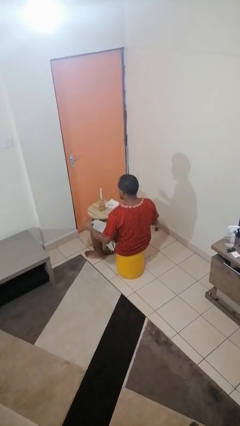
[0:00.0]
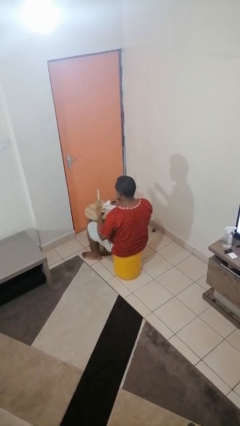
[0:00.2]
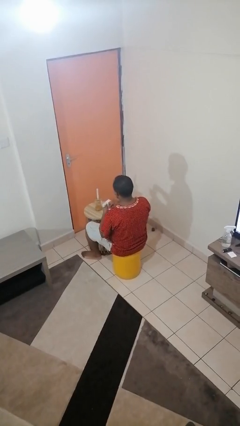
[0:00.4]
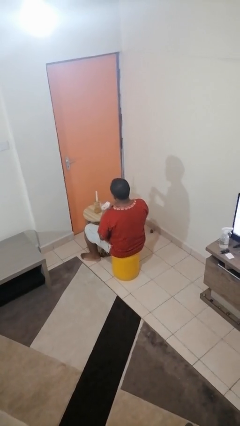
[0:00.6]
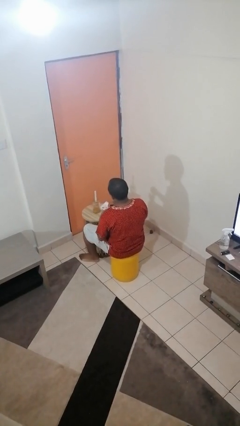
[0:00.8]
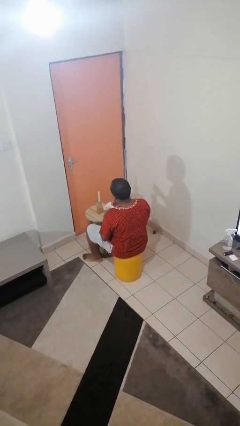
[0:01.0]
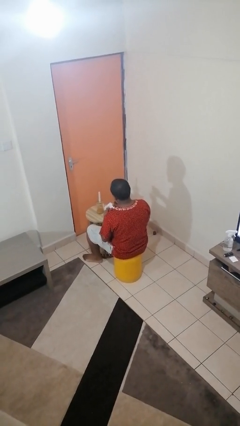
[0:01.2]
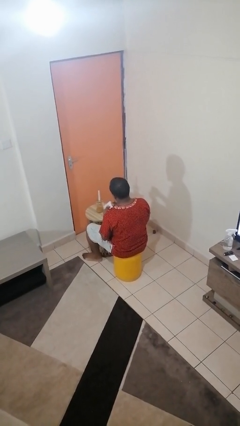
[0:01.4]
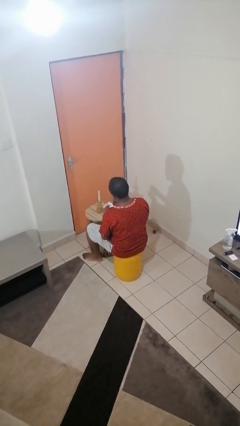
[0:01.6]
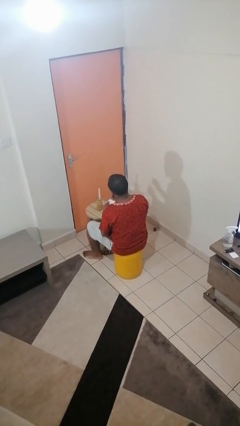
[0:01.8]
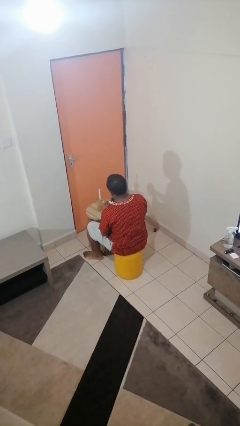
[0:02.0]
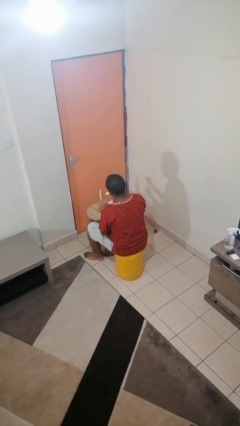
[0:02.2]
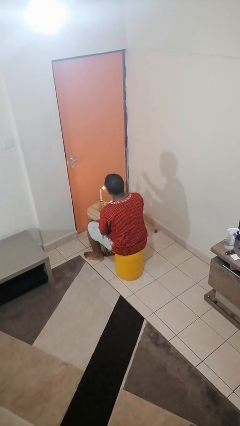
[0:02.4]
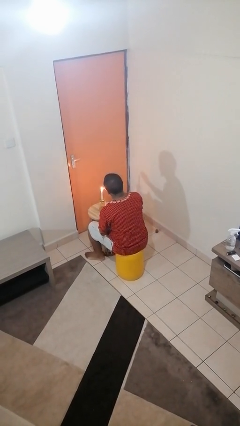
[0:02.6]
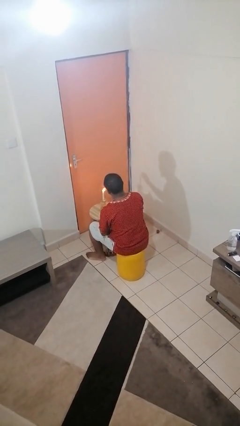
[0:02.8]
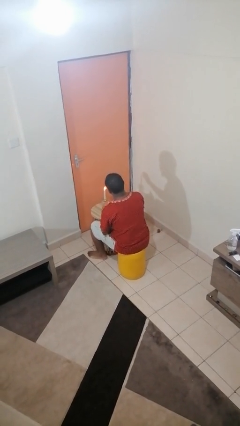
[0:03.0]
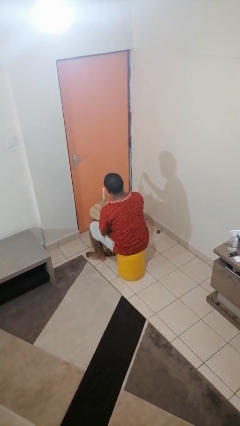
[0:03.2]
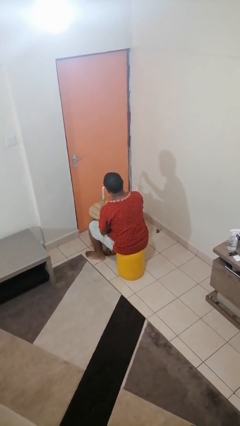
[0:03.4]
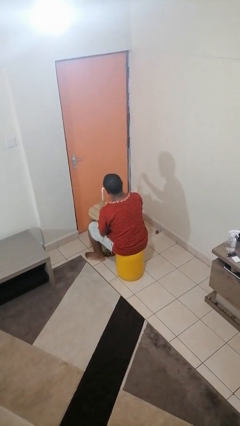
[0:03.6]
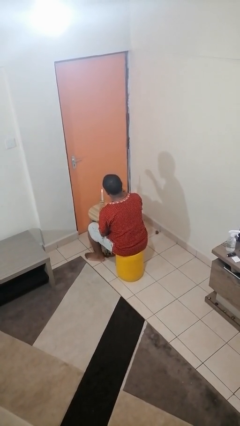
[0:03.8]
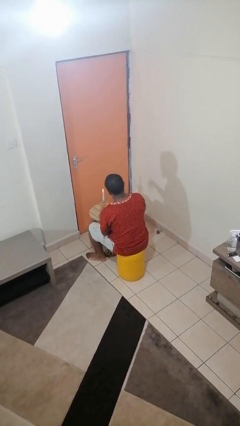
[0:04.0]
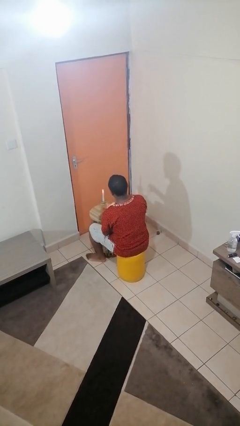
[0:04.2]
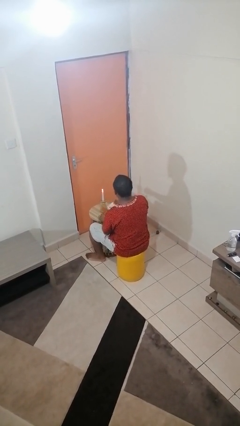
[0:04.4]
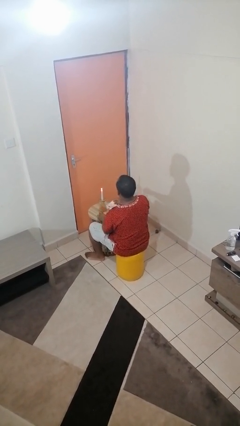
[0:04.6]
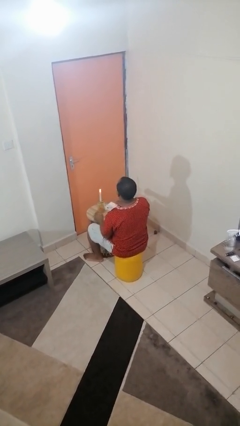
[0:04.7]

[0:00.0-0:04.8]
person lights candle

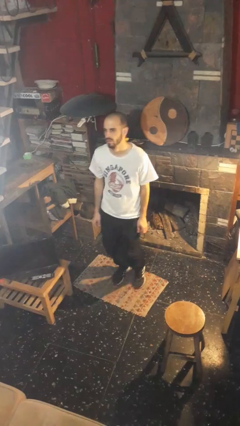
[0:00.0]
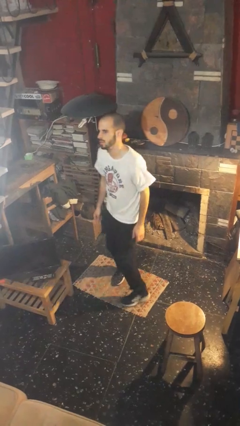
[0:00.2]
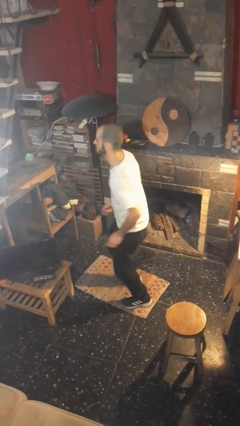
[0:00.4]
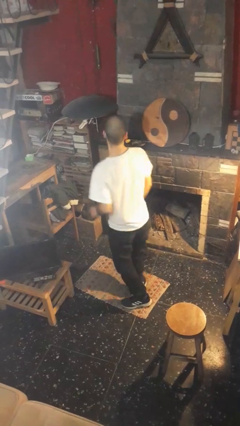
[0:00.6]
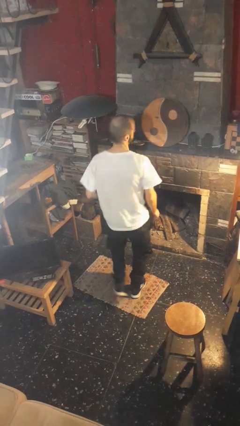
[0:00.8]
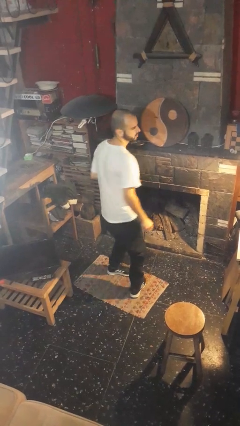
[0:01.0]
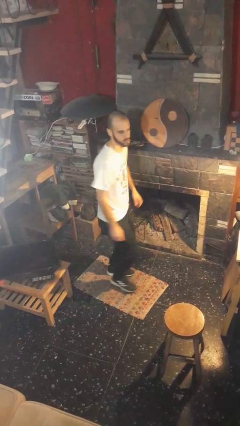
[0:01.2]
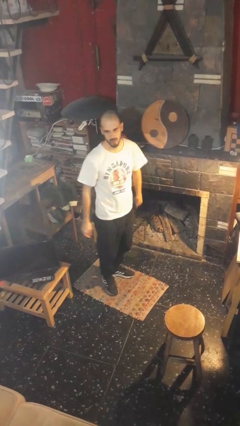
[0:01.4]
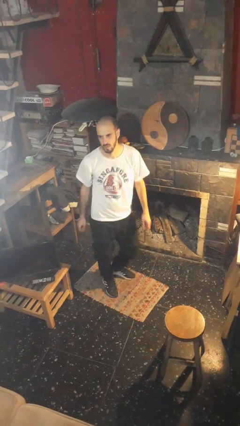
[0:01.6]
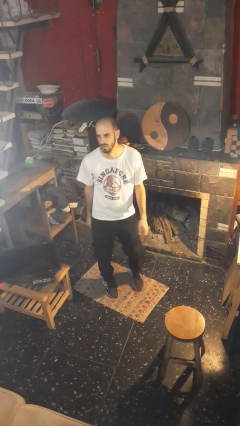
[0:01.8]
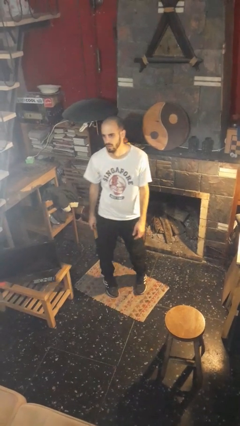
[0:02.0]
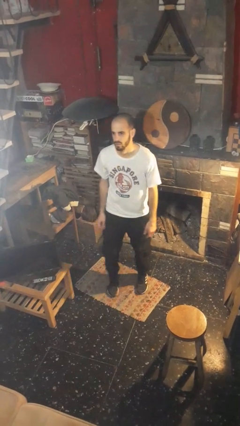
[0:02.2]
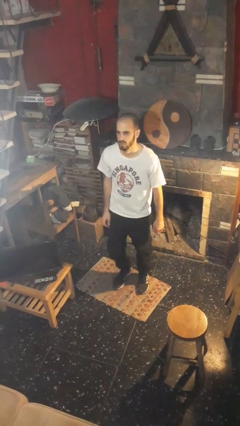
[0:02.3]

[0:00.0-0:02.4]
person twirls

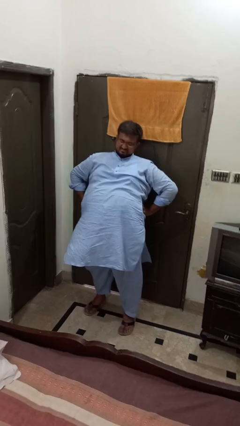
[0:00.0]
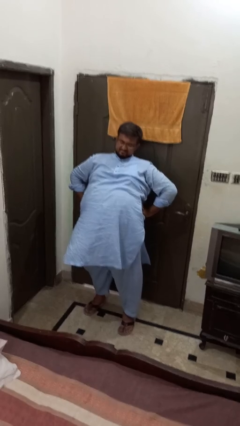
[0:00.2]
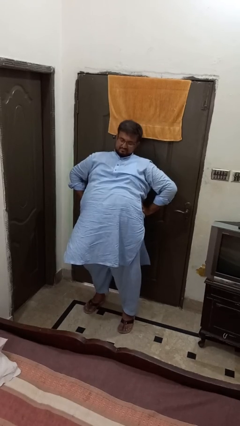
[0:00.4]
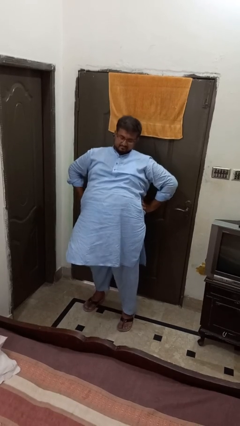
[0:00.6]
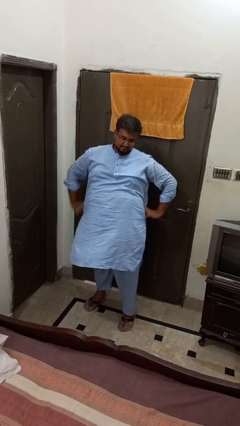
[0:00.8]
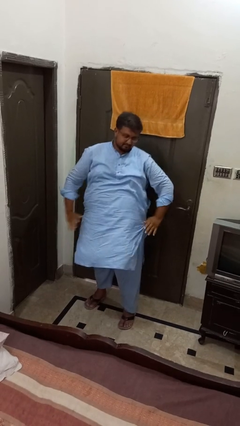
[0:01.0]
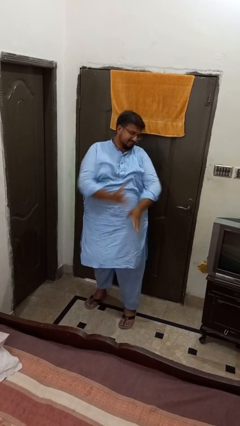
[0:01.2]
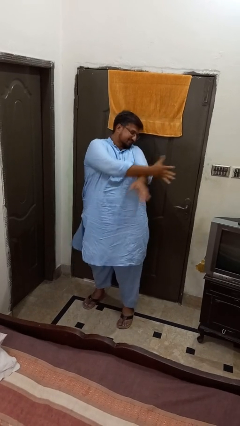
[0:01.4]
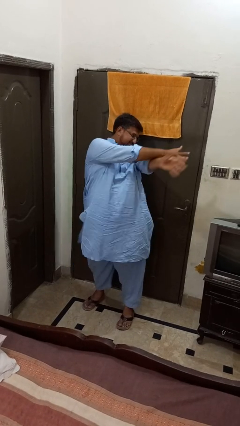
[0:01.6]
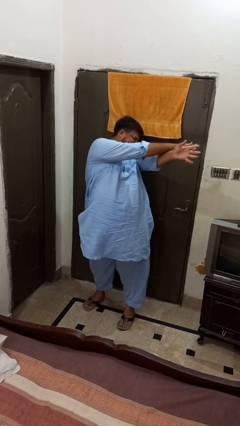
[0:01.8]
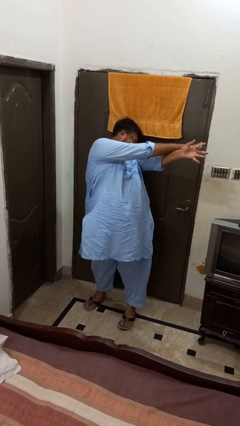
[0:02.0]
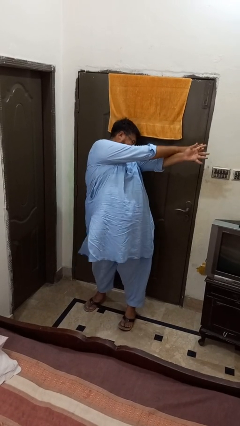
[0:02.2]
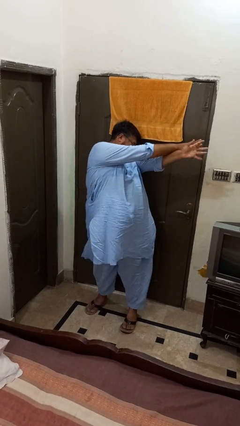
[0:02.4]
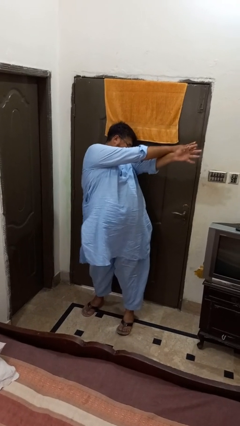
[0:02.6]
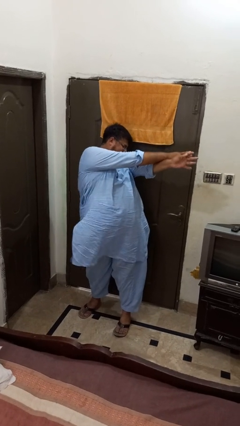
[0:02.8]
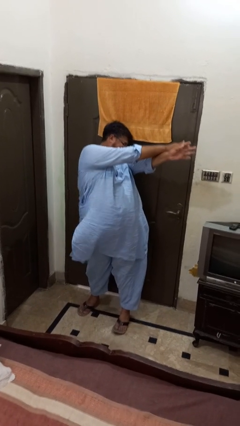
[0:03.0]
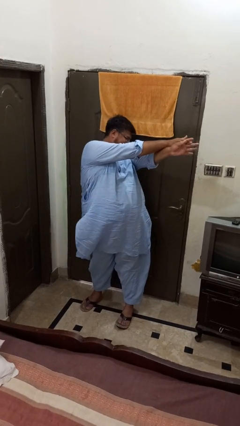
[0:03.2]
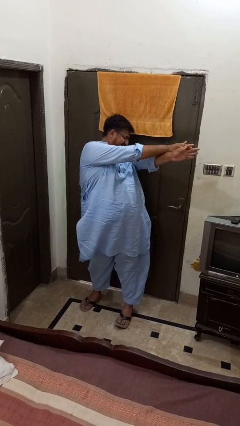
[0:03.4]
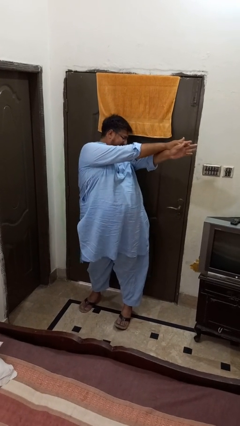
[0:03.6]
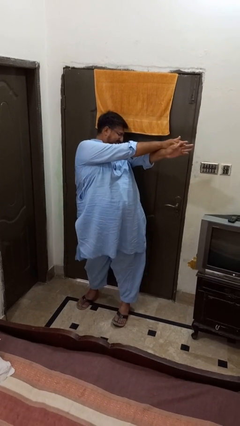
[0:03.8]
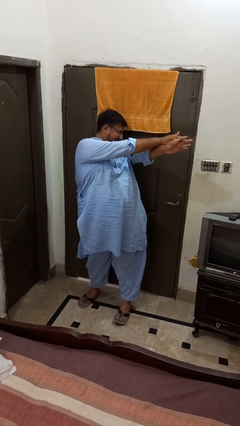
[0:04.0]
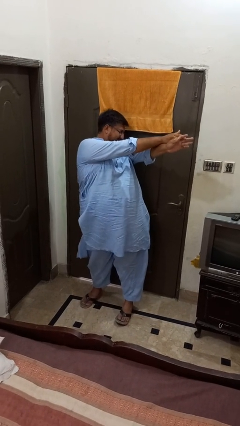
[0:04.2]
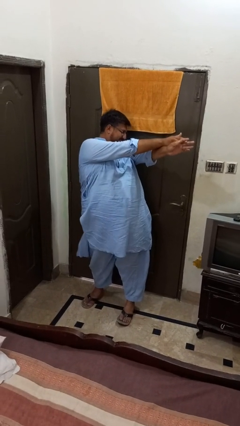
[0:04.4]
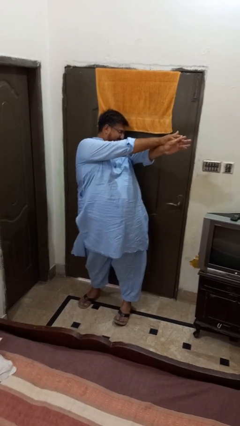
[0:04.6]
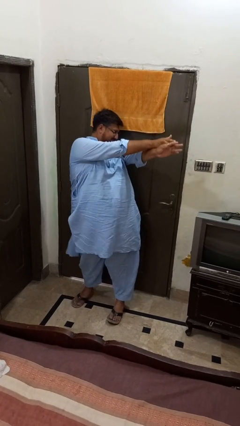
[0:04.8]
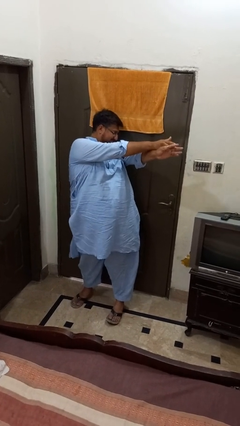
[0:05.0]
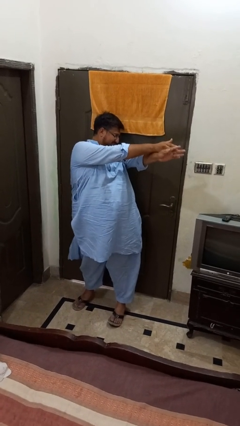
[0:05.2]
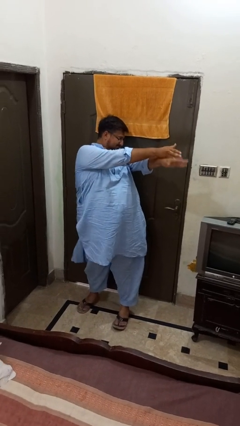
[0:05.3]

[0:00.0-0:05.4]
person stretches arms to side

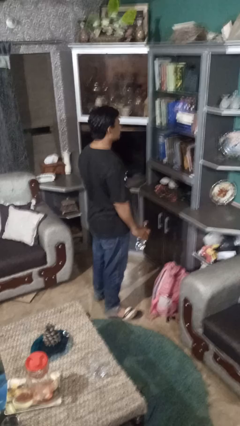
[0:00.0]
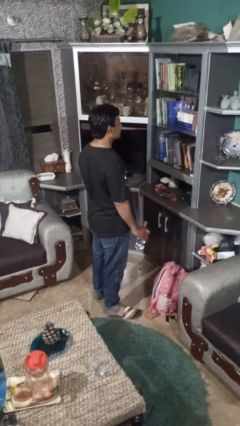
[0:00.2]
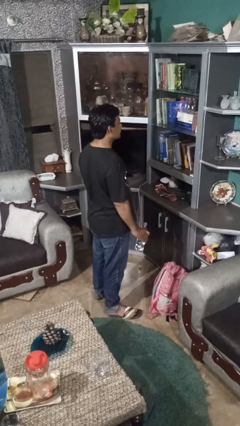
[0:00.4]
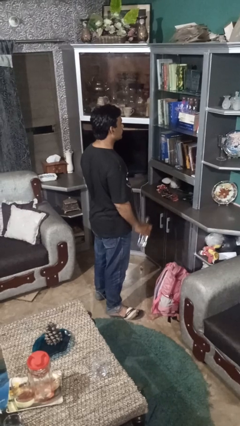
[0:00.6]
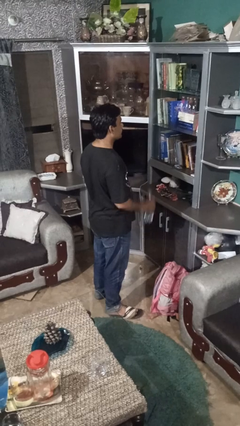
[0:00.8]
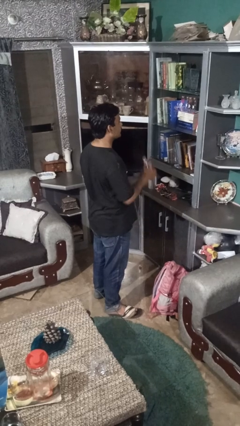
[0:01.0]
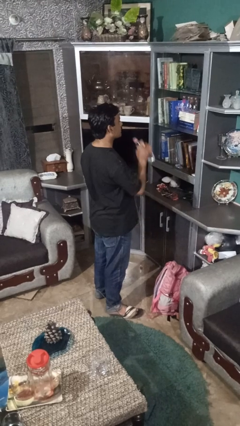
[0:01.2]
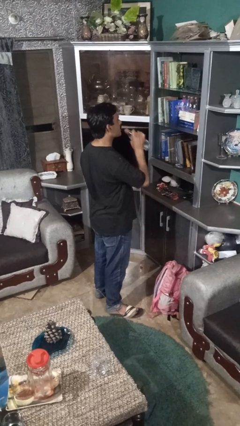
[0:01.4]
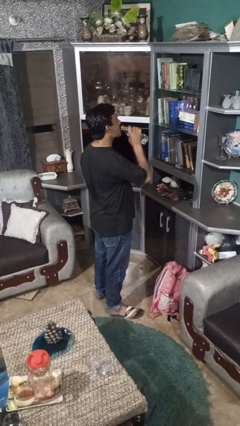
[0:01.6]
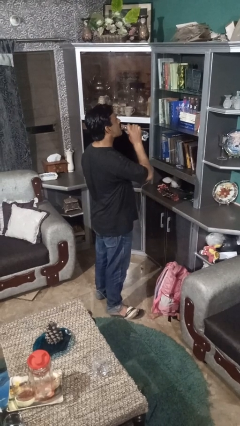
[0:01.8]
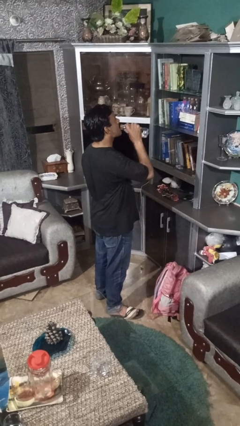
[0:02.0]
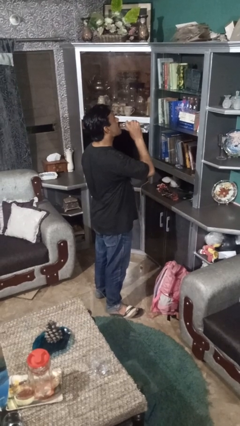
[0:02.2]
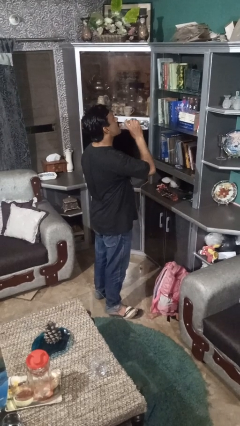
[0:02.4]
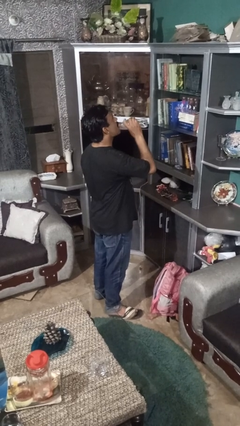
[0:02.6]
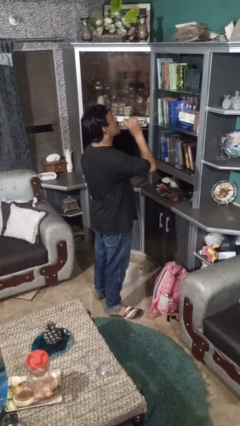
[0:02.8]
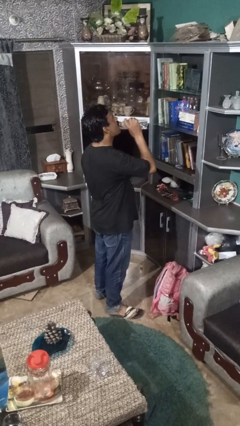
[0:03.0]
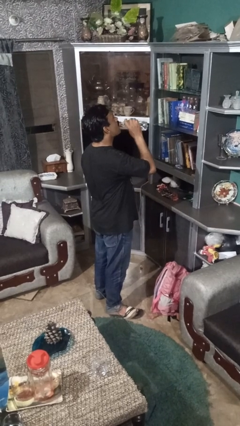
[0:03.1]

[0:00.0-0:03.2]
person drinks from bottle

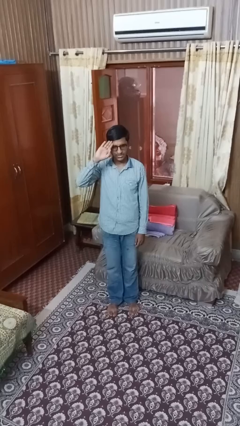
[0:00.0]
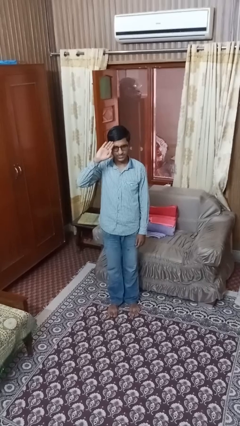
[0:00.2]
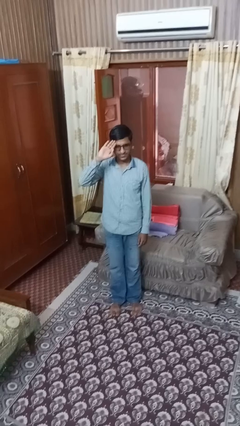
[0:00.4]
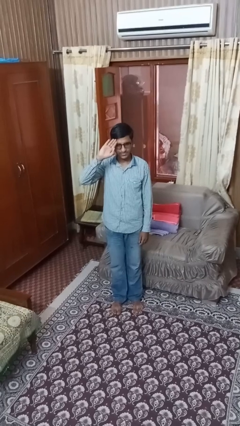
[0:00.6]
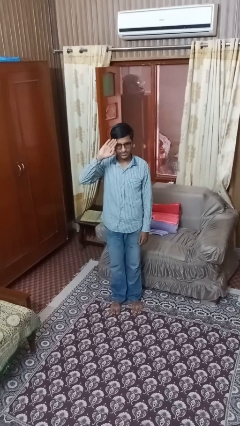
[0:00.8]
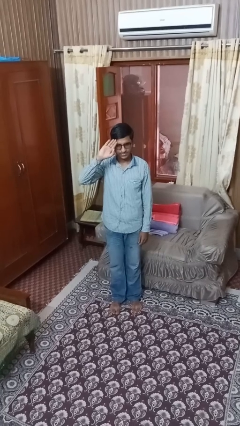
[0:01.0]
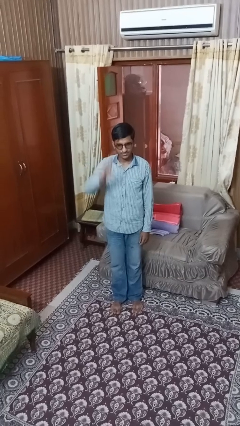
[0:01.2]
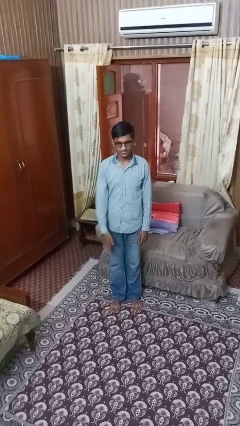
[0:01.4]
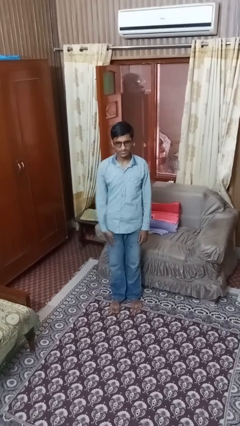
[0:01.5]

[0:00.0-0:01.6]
person salutes
